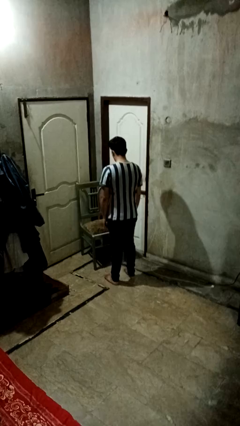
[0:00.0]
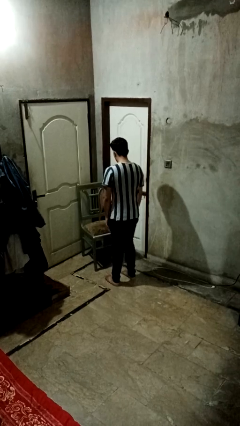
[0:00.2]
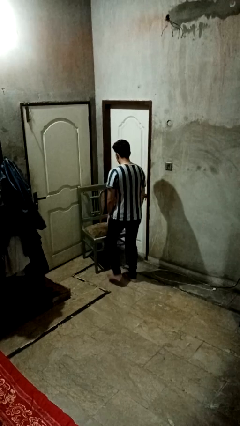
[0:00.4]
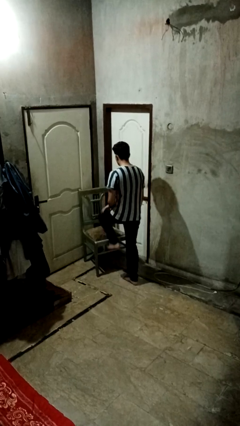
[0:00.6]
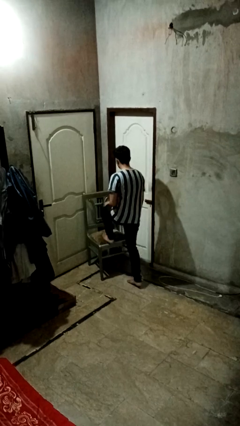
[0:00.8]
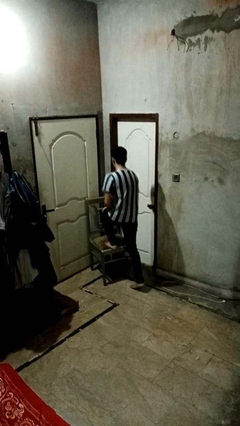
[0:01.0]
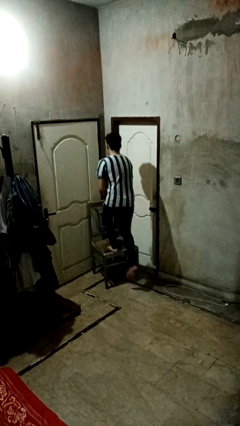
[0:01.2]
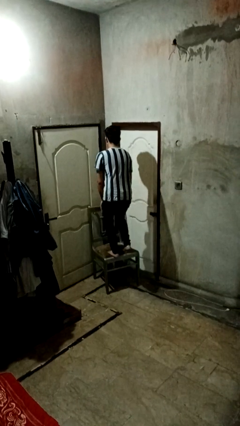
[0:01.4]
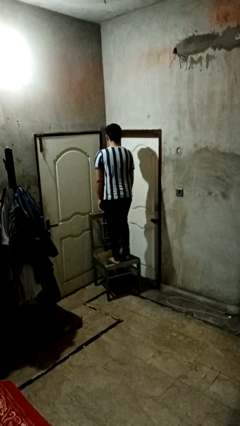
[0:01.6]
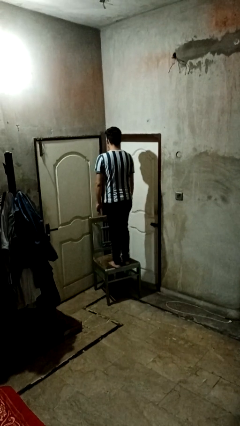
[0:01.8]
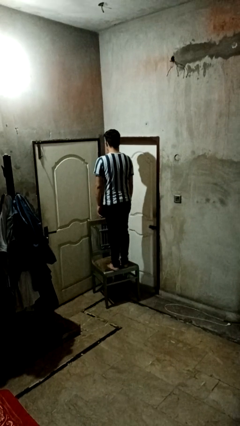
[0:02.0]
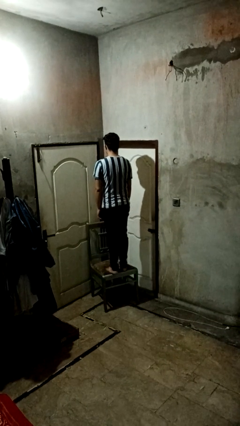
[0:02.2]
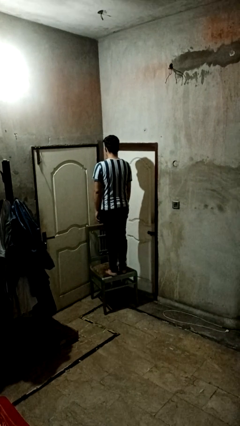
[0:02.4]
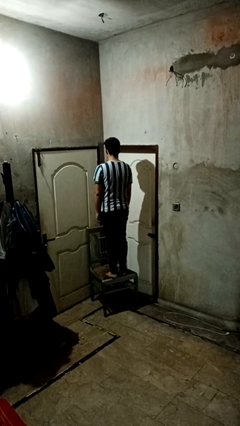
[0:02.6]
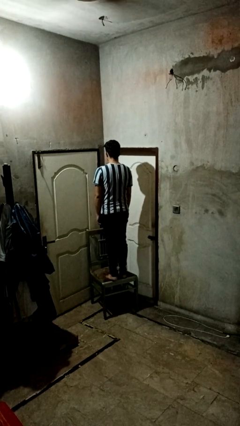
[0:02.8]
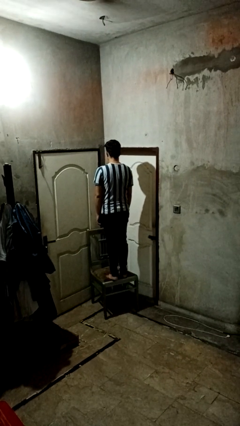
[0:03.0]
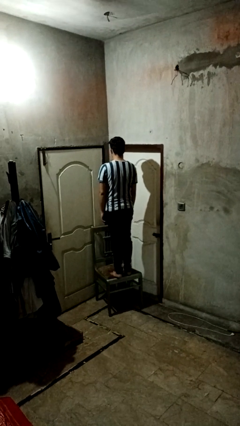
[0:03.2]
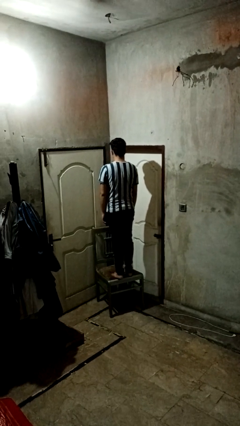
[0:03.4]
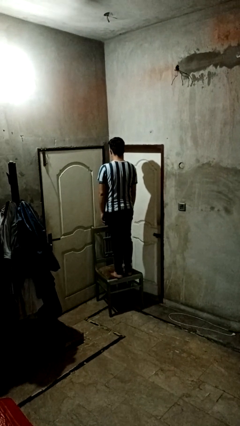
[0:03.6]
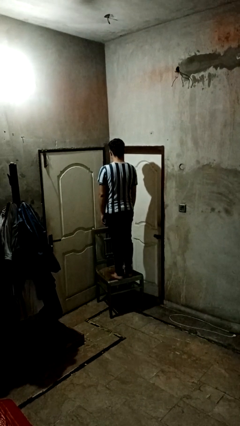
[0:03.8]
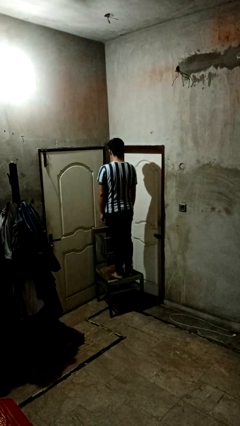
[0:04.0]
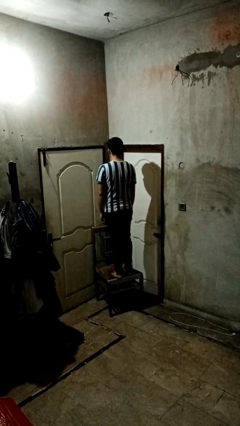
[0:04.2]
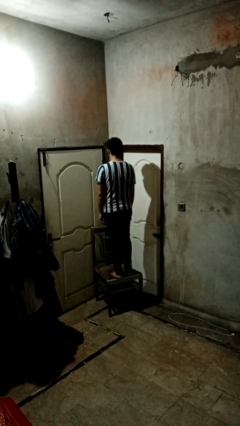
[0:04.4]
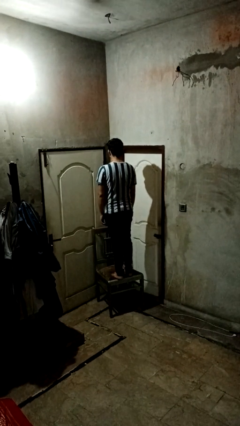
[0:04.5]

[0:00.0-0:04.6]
person climbs on chair

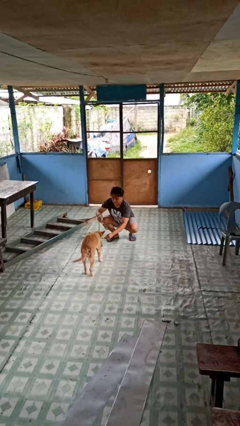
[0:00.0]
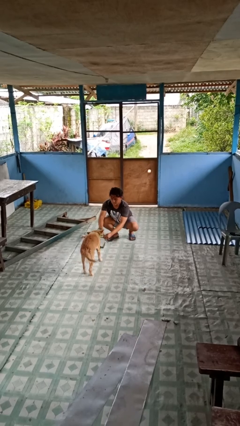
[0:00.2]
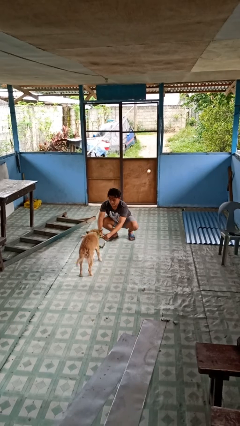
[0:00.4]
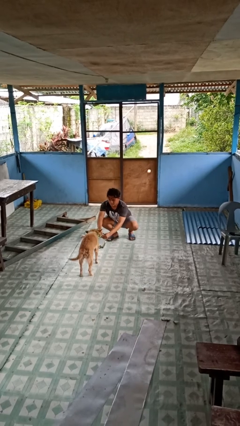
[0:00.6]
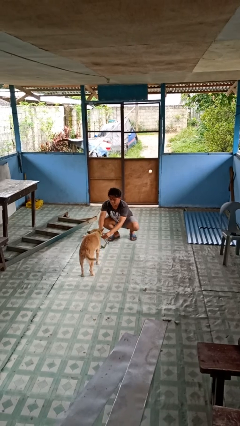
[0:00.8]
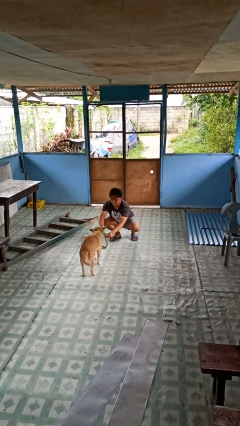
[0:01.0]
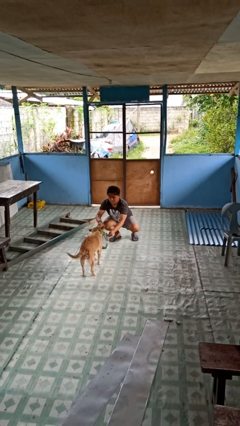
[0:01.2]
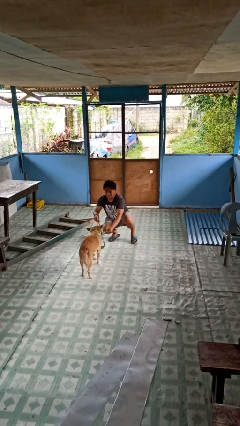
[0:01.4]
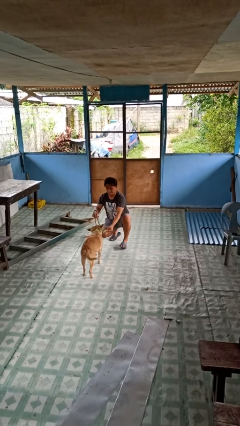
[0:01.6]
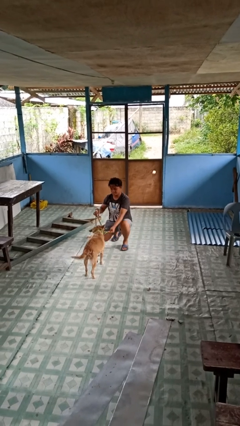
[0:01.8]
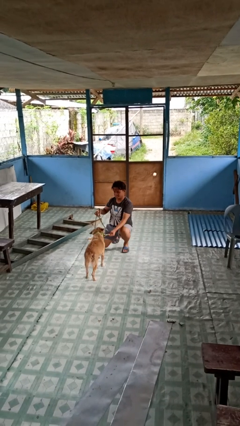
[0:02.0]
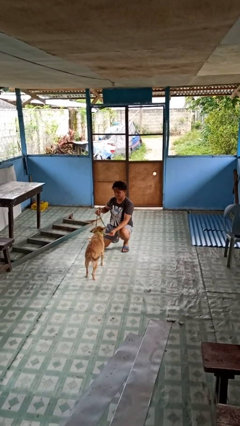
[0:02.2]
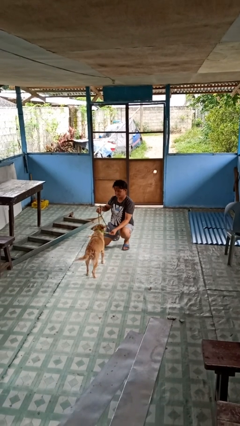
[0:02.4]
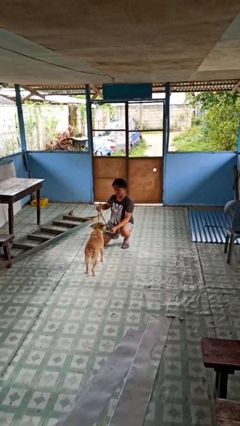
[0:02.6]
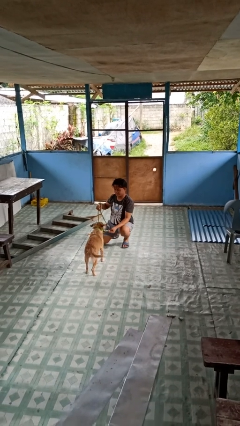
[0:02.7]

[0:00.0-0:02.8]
person attaches leash to dog

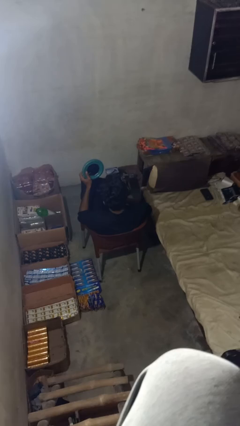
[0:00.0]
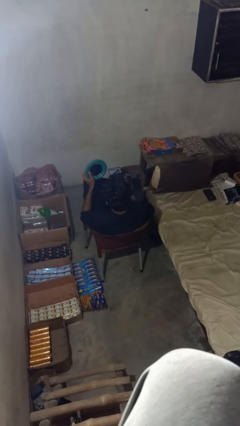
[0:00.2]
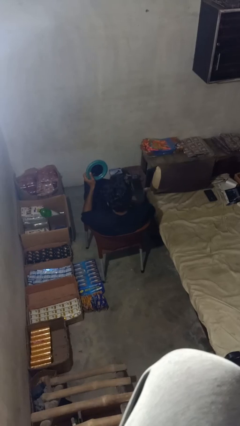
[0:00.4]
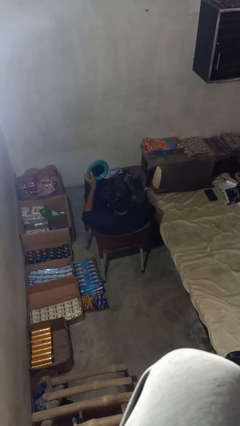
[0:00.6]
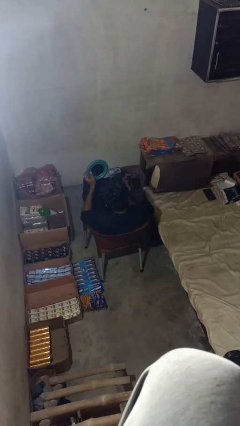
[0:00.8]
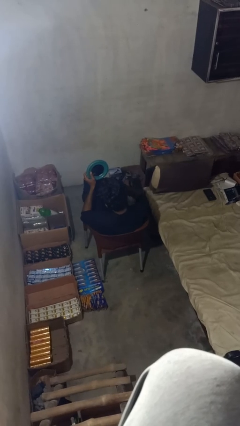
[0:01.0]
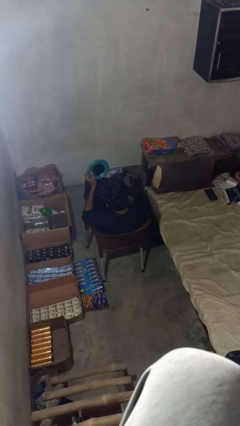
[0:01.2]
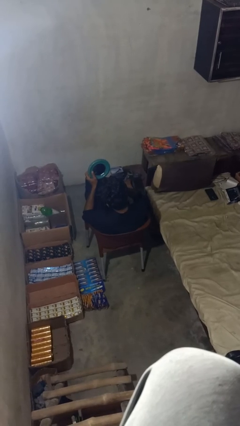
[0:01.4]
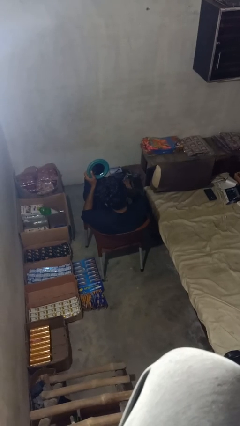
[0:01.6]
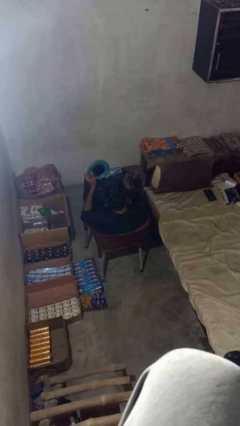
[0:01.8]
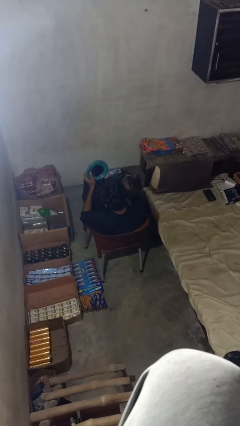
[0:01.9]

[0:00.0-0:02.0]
person applies eye makeup

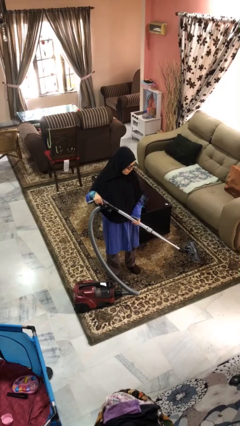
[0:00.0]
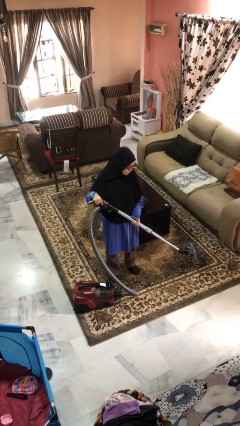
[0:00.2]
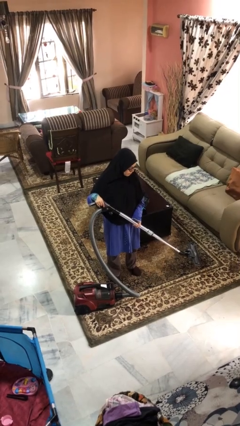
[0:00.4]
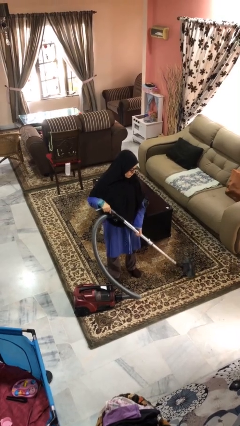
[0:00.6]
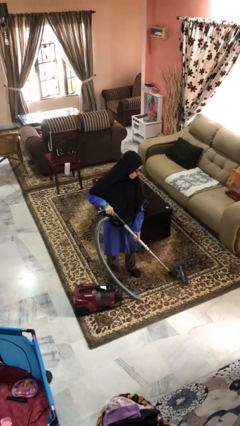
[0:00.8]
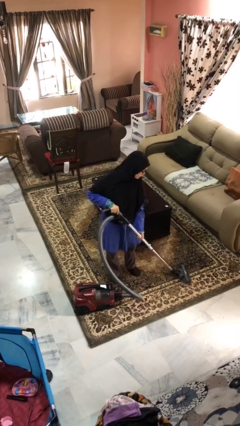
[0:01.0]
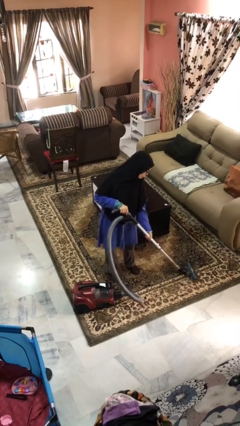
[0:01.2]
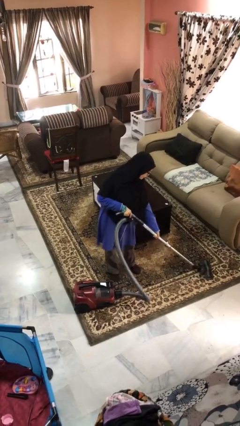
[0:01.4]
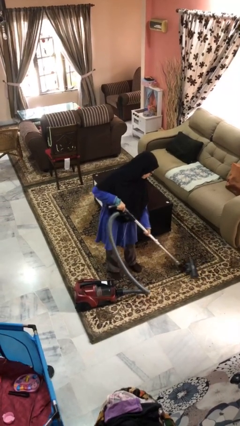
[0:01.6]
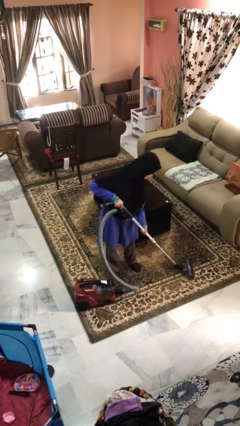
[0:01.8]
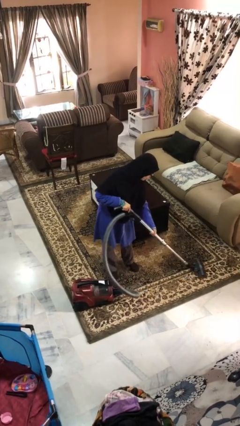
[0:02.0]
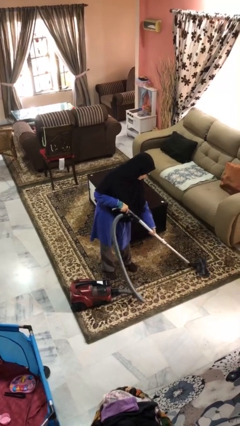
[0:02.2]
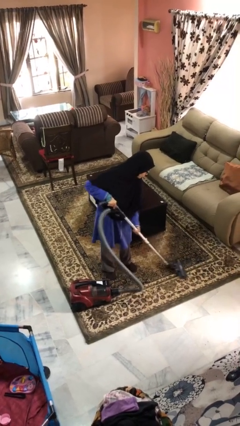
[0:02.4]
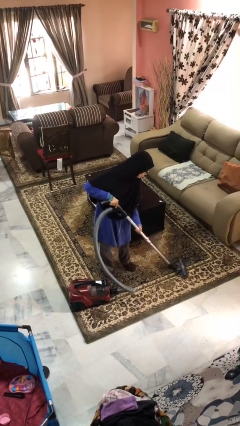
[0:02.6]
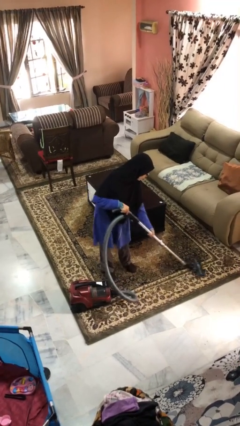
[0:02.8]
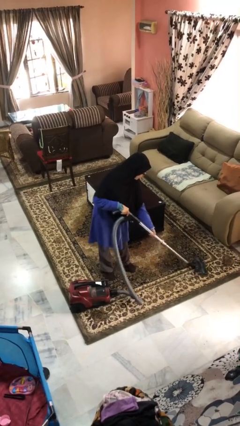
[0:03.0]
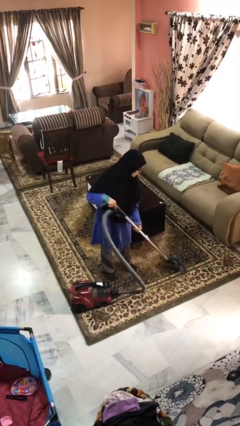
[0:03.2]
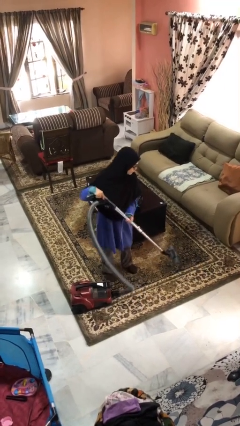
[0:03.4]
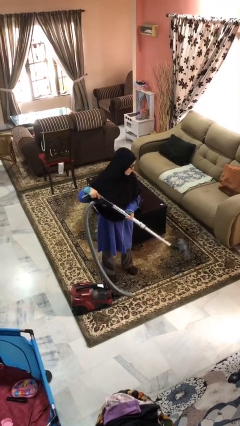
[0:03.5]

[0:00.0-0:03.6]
person vacuums carpet

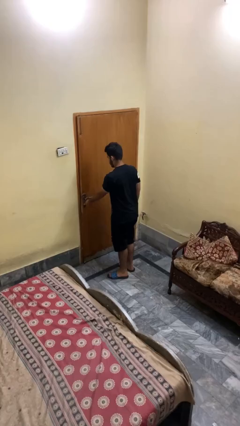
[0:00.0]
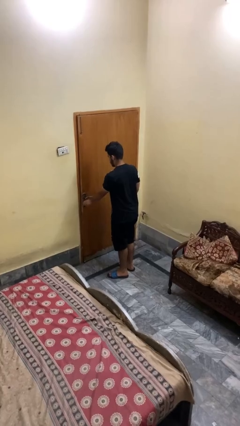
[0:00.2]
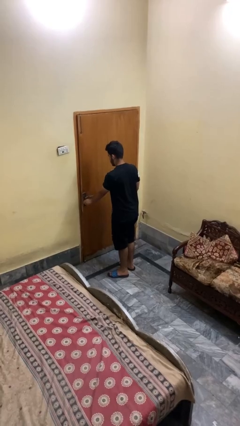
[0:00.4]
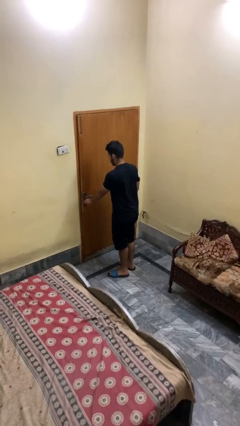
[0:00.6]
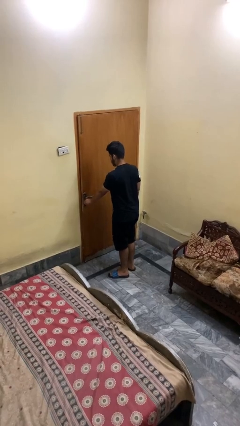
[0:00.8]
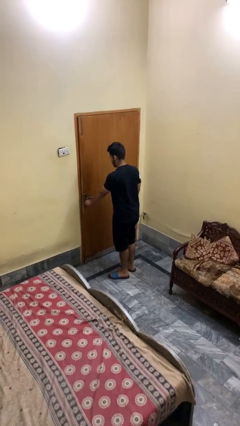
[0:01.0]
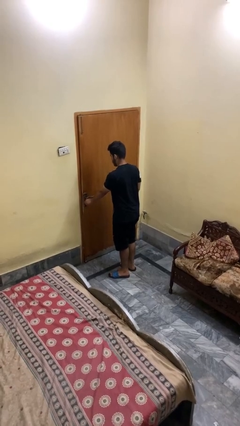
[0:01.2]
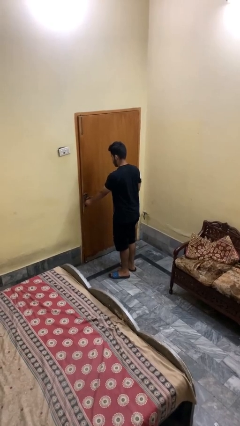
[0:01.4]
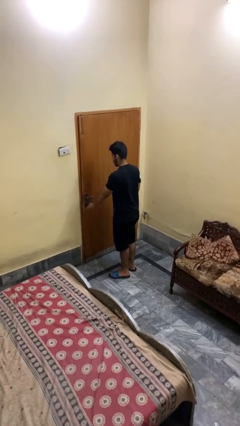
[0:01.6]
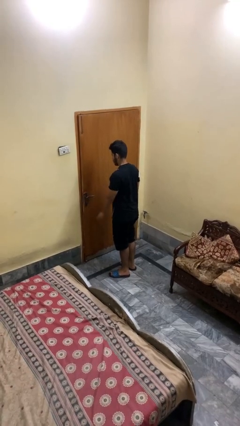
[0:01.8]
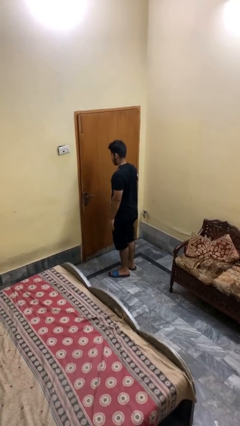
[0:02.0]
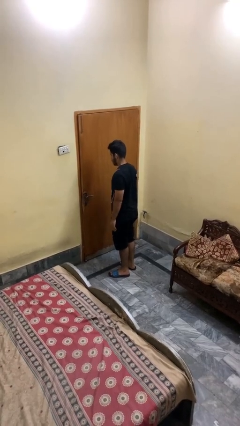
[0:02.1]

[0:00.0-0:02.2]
person locks door with keys

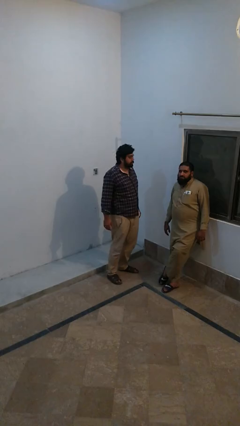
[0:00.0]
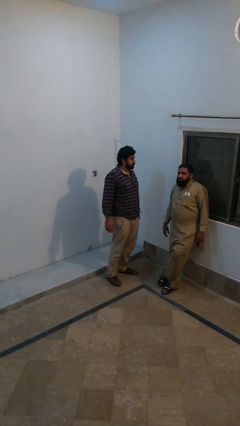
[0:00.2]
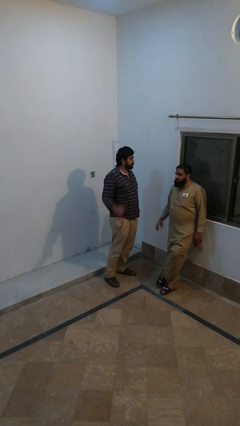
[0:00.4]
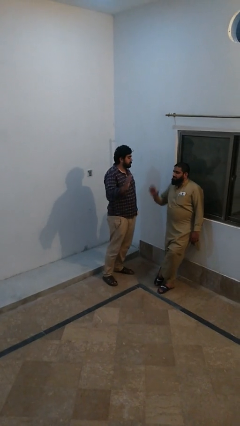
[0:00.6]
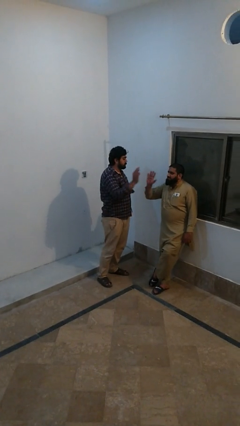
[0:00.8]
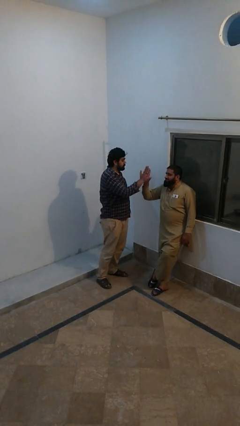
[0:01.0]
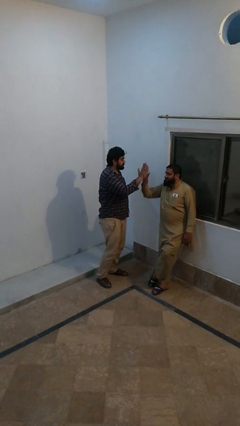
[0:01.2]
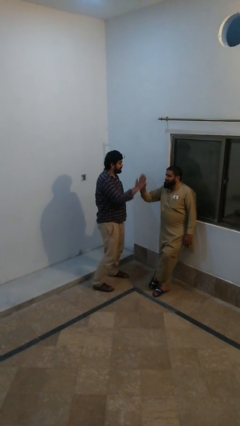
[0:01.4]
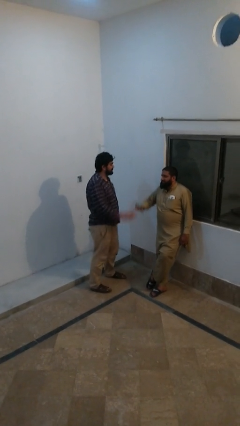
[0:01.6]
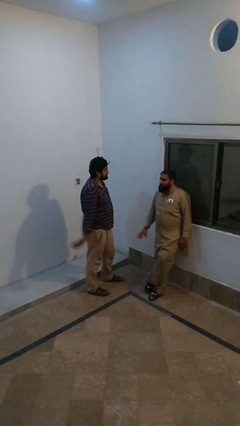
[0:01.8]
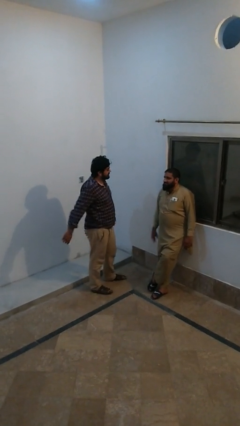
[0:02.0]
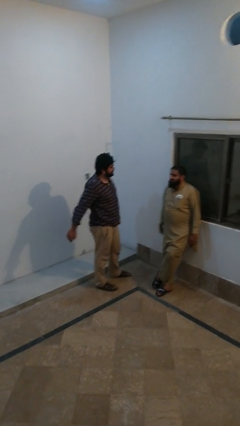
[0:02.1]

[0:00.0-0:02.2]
person highfives hand
